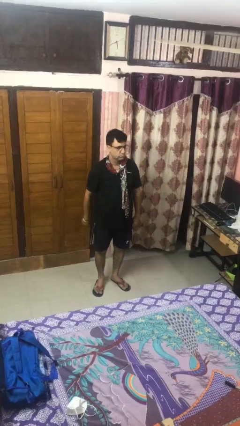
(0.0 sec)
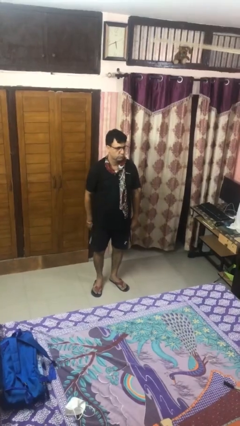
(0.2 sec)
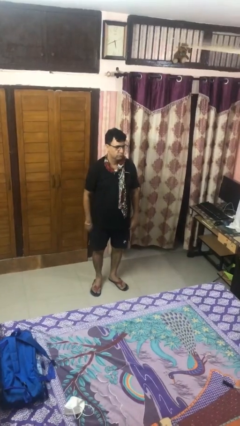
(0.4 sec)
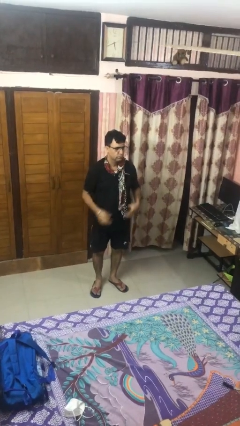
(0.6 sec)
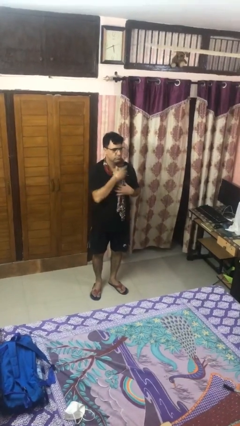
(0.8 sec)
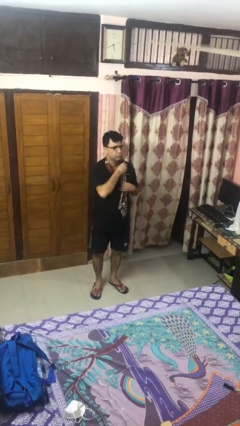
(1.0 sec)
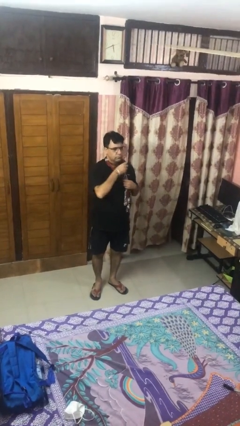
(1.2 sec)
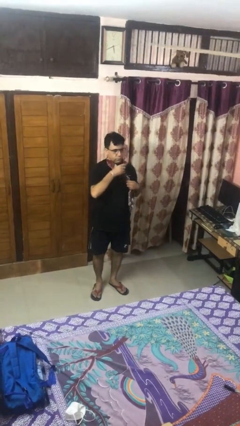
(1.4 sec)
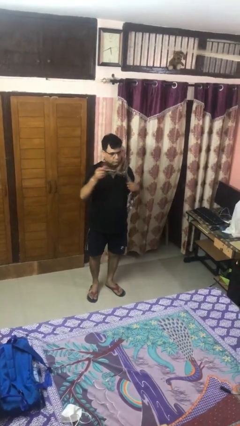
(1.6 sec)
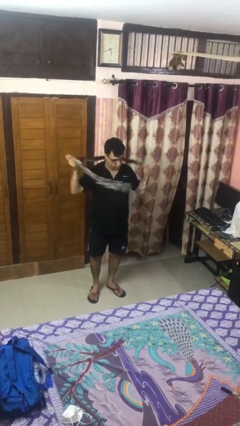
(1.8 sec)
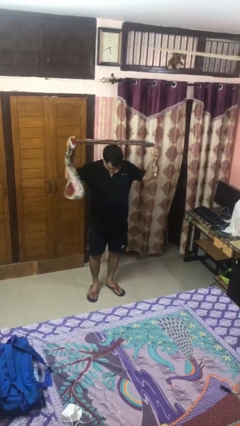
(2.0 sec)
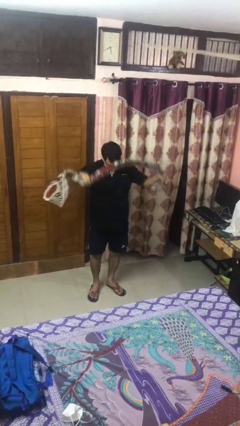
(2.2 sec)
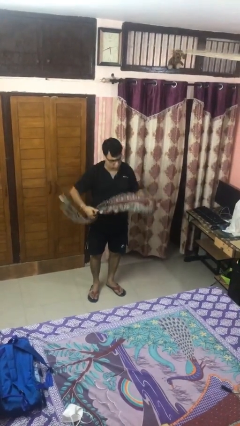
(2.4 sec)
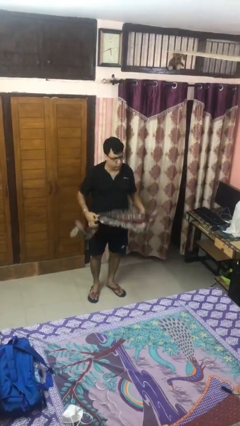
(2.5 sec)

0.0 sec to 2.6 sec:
person takes off scarf

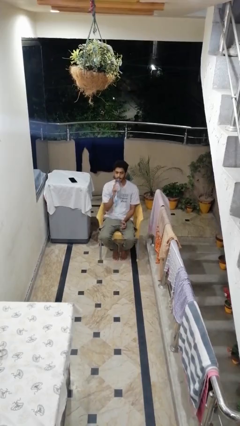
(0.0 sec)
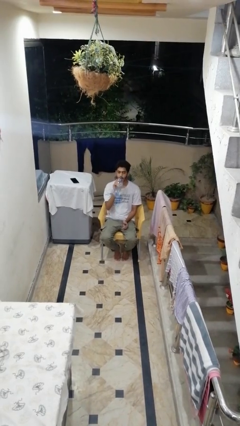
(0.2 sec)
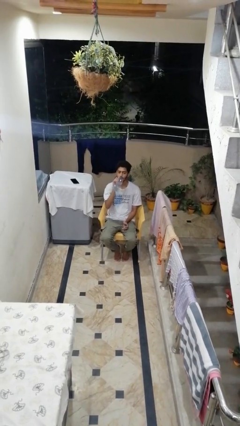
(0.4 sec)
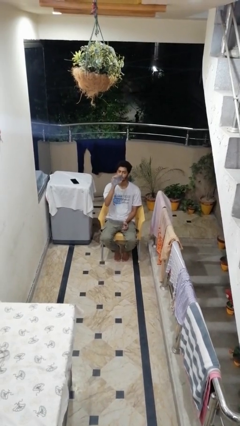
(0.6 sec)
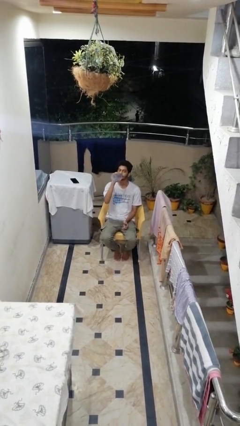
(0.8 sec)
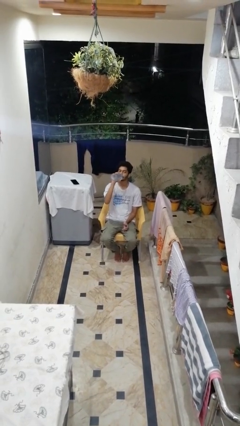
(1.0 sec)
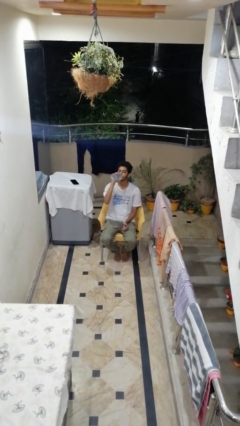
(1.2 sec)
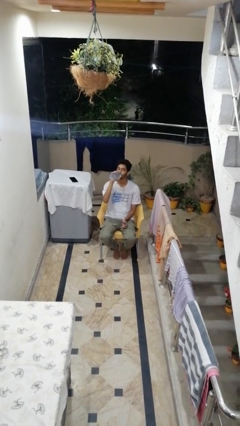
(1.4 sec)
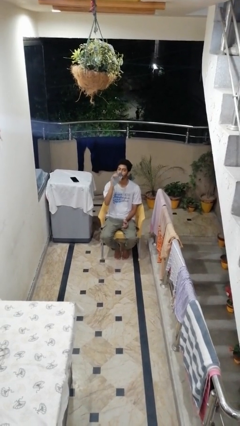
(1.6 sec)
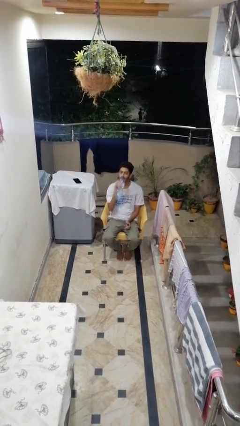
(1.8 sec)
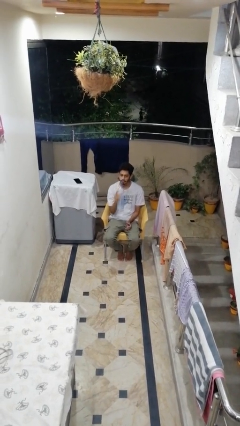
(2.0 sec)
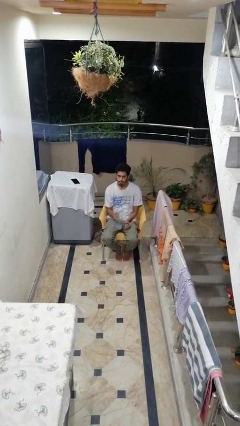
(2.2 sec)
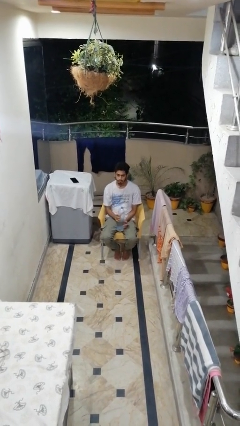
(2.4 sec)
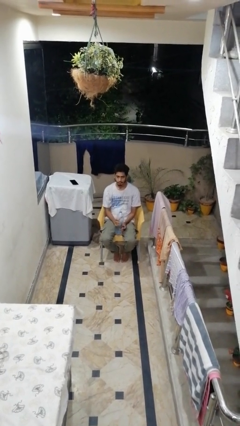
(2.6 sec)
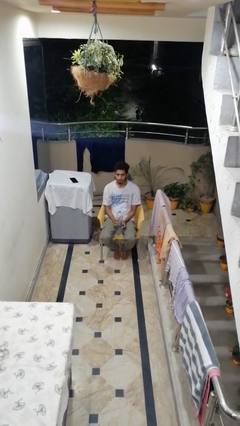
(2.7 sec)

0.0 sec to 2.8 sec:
person drinks from bottle

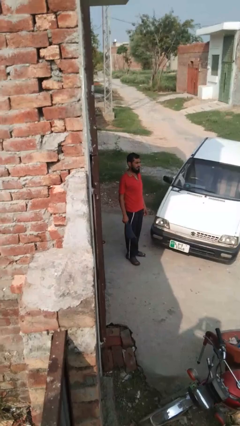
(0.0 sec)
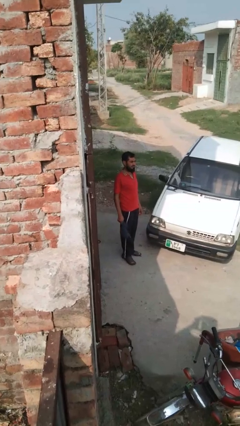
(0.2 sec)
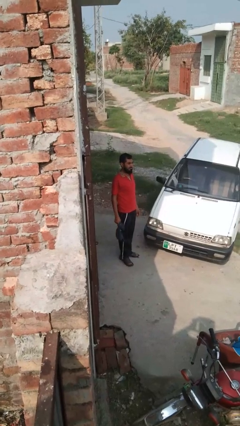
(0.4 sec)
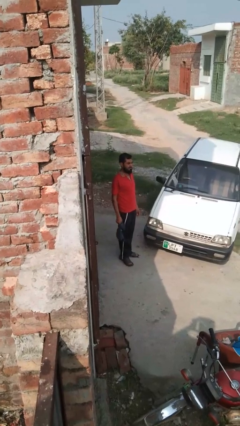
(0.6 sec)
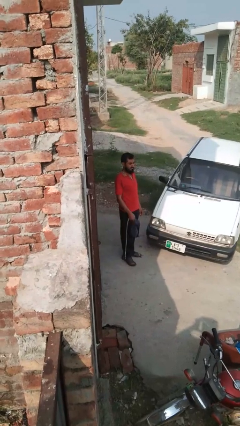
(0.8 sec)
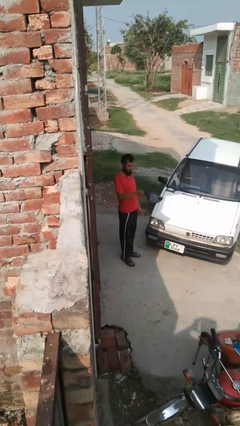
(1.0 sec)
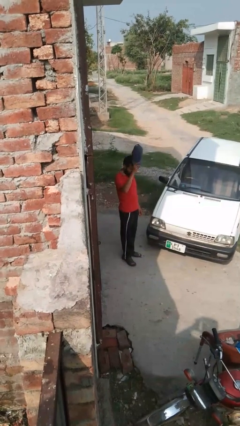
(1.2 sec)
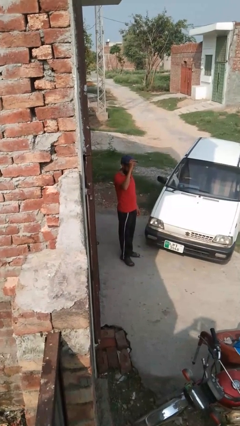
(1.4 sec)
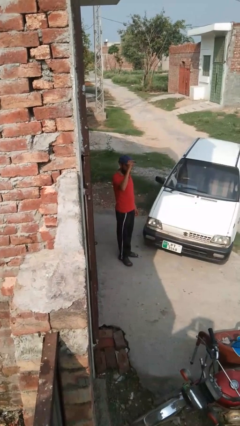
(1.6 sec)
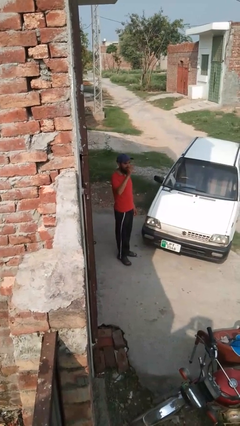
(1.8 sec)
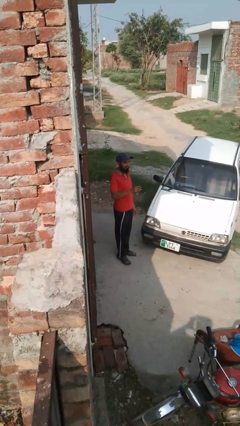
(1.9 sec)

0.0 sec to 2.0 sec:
person puts on hat

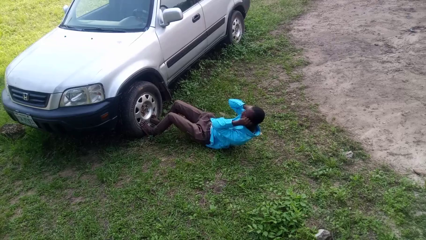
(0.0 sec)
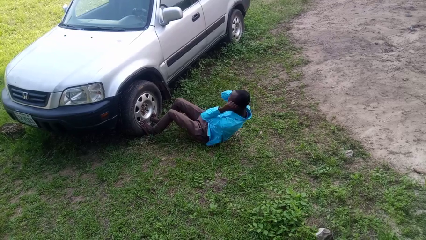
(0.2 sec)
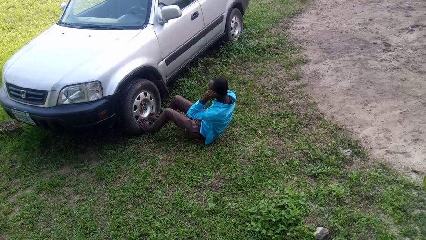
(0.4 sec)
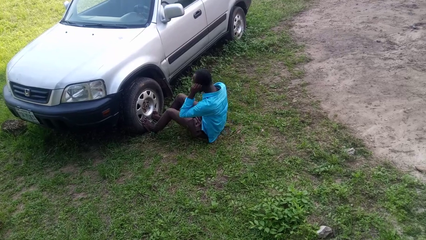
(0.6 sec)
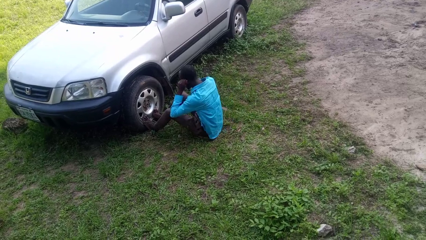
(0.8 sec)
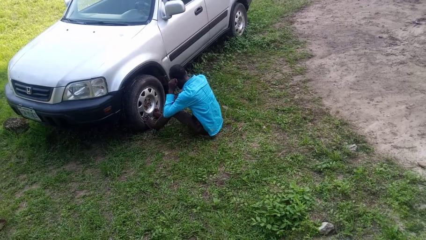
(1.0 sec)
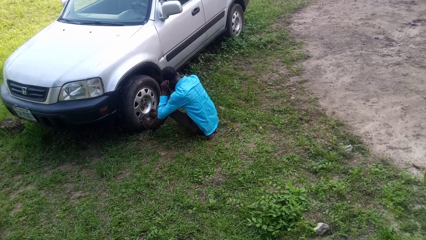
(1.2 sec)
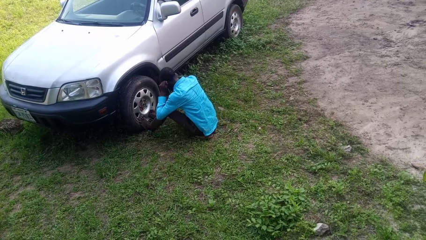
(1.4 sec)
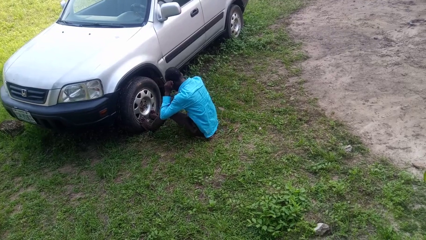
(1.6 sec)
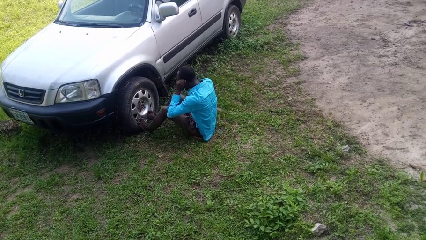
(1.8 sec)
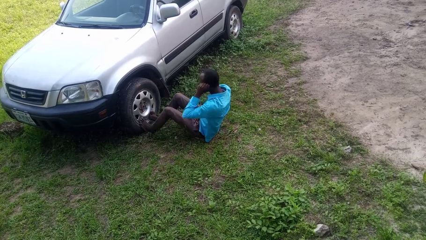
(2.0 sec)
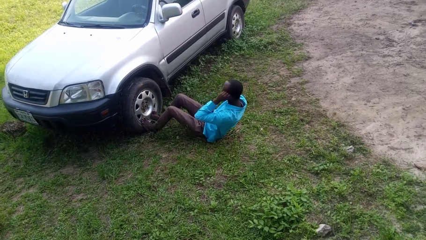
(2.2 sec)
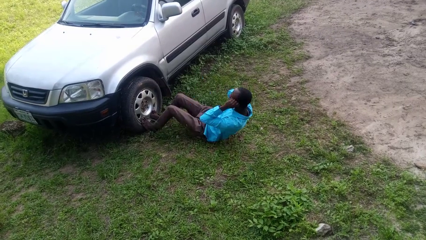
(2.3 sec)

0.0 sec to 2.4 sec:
person exercises with situp

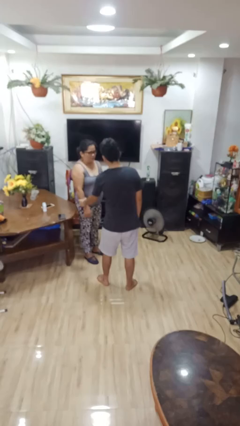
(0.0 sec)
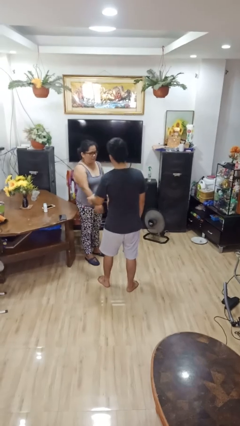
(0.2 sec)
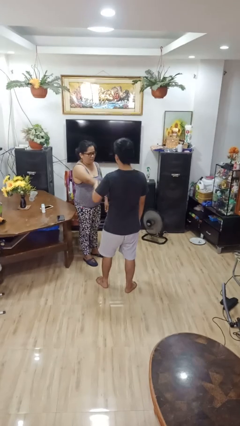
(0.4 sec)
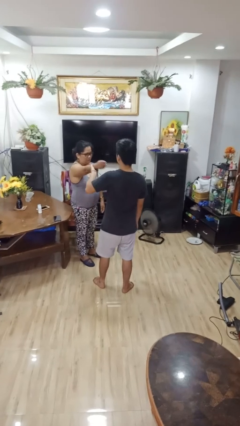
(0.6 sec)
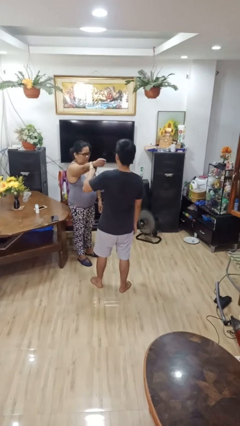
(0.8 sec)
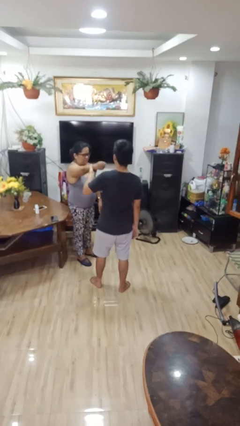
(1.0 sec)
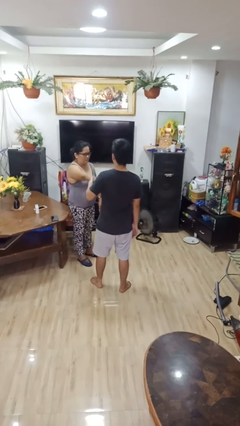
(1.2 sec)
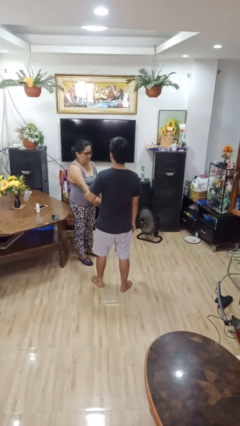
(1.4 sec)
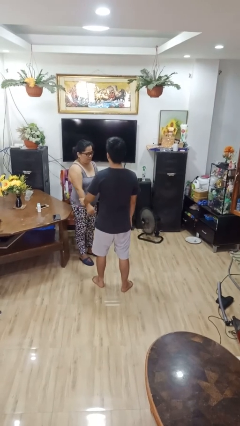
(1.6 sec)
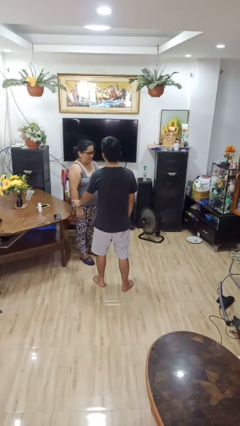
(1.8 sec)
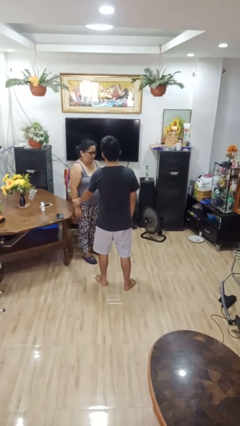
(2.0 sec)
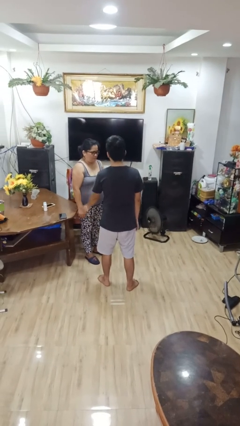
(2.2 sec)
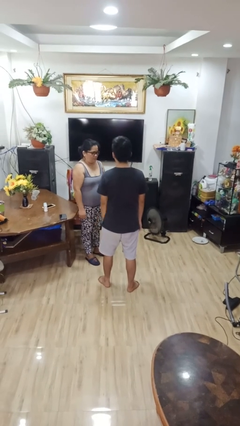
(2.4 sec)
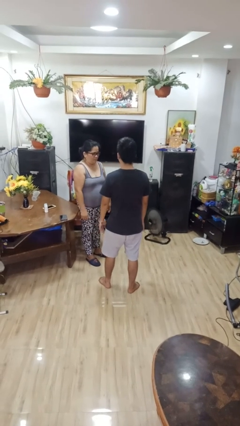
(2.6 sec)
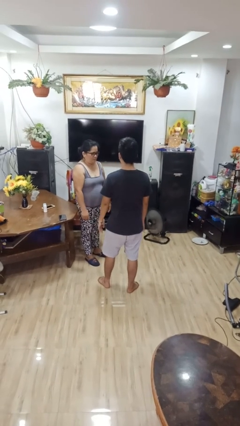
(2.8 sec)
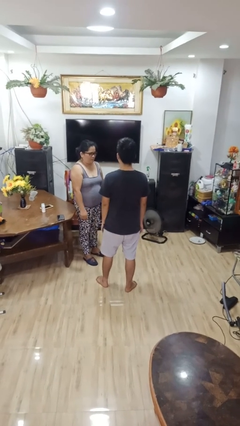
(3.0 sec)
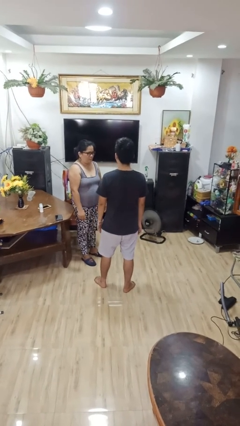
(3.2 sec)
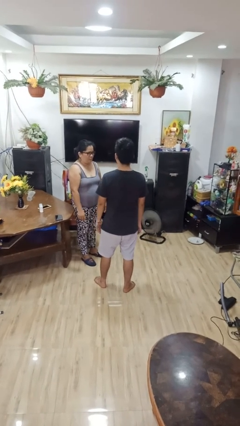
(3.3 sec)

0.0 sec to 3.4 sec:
person grabs person by forearm

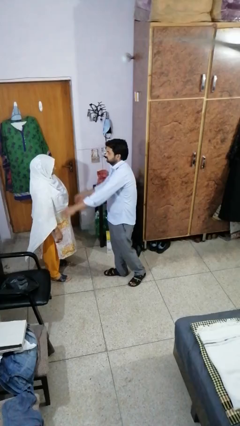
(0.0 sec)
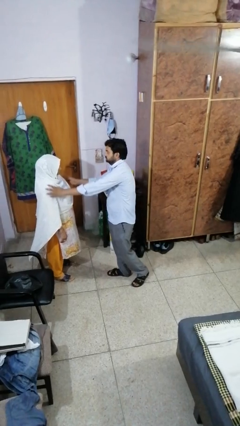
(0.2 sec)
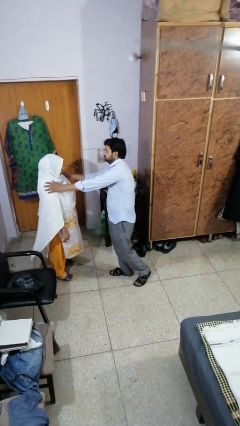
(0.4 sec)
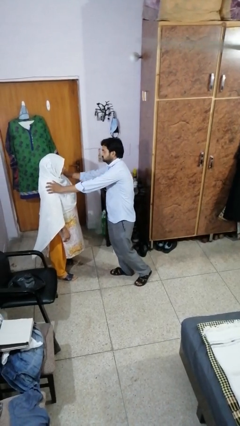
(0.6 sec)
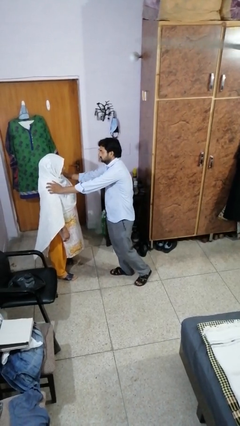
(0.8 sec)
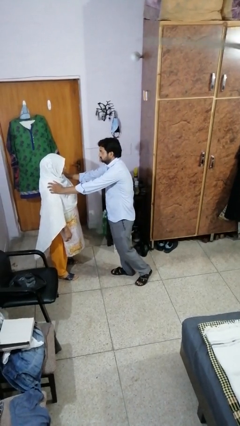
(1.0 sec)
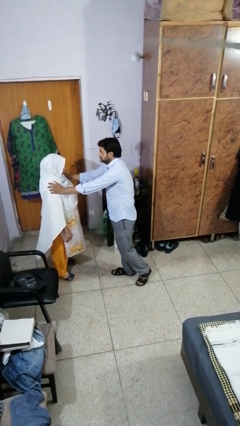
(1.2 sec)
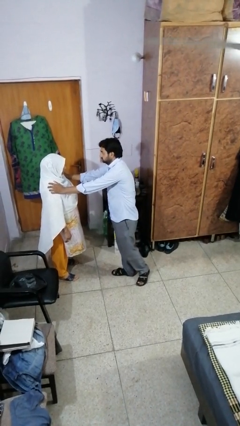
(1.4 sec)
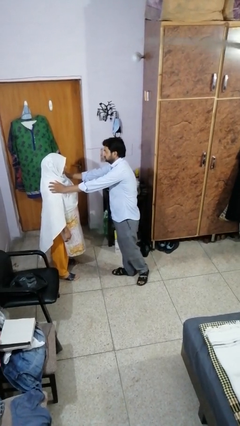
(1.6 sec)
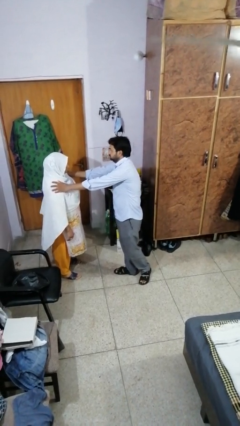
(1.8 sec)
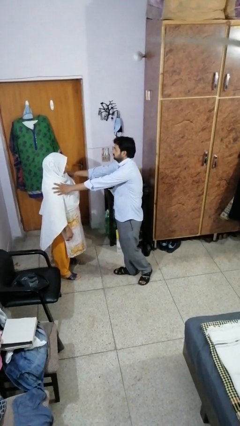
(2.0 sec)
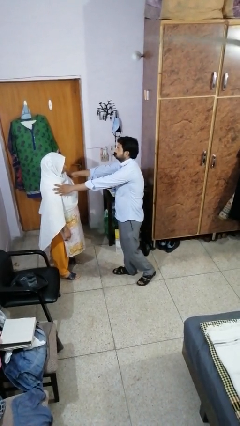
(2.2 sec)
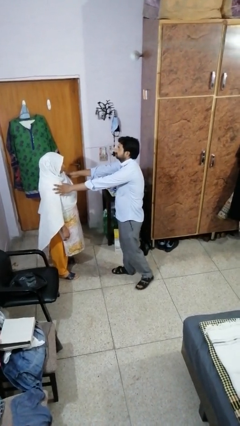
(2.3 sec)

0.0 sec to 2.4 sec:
person pounds shoulders of person

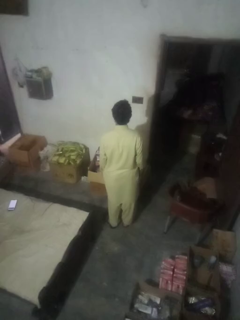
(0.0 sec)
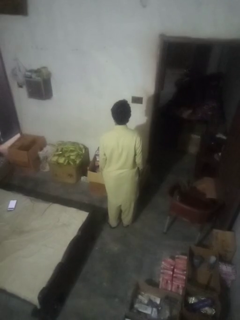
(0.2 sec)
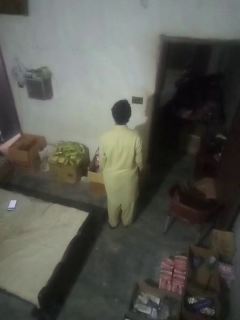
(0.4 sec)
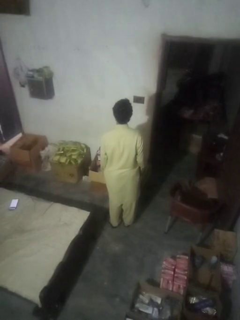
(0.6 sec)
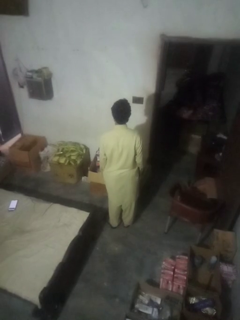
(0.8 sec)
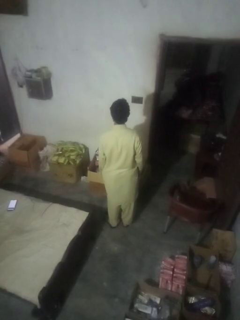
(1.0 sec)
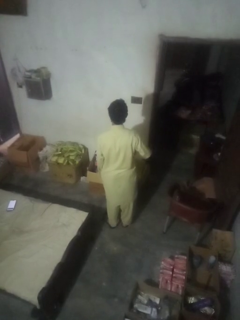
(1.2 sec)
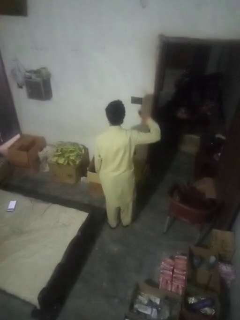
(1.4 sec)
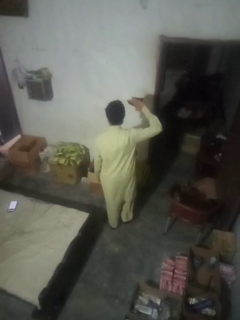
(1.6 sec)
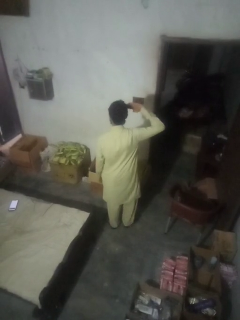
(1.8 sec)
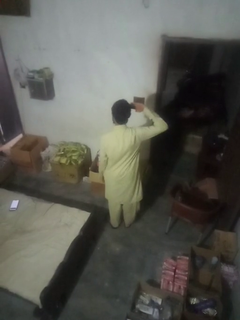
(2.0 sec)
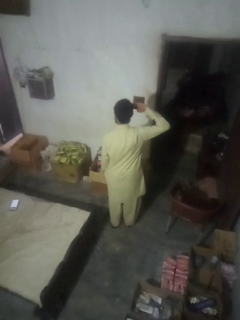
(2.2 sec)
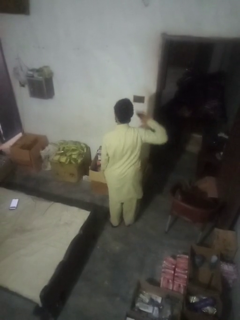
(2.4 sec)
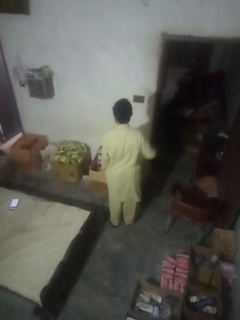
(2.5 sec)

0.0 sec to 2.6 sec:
person salutes
